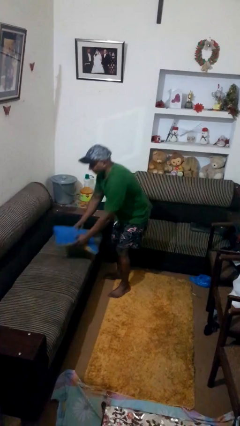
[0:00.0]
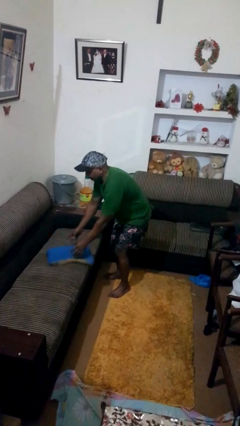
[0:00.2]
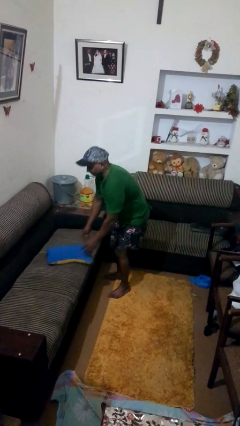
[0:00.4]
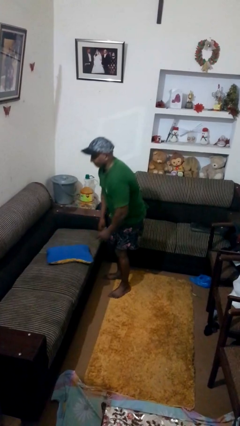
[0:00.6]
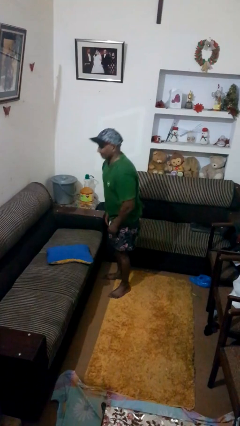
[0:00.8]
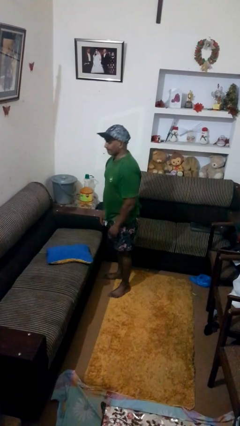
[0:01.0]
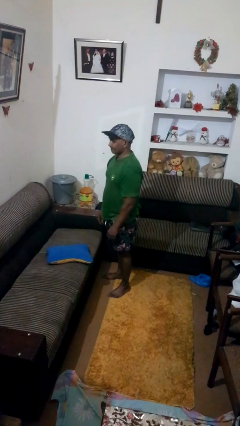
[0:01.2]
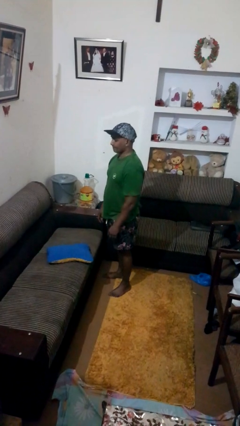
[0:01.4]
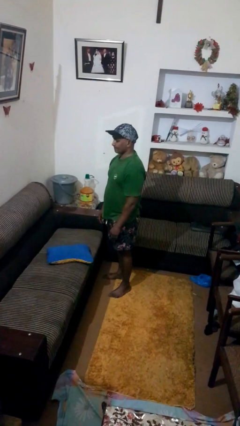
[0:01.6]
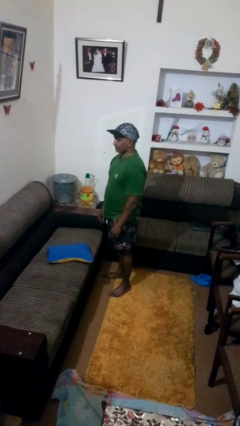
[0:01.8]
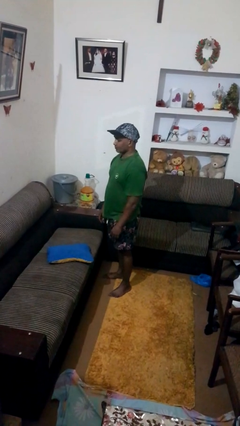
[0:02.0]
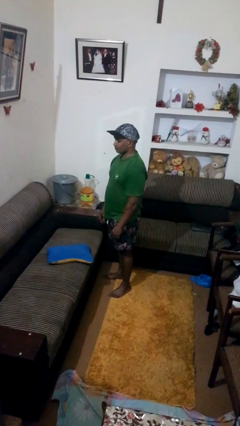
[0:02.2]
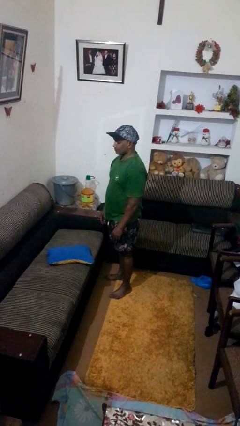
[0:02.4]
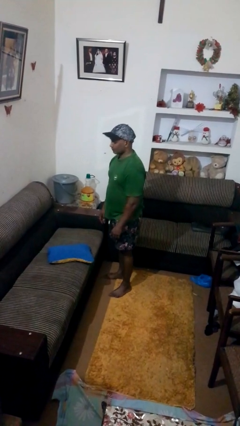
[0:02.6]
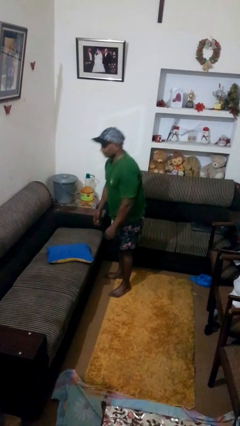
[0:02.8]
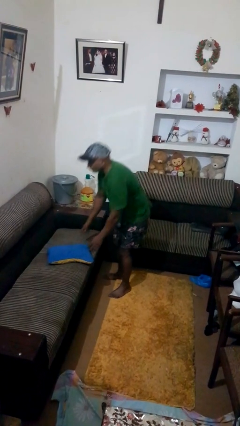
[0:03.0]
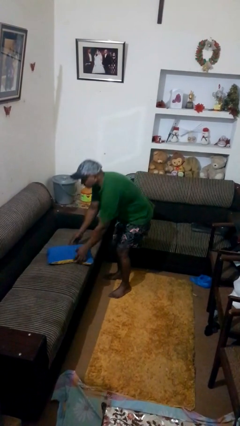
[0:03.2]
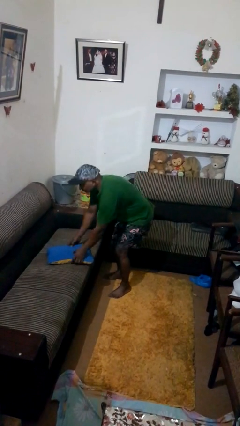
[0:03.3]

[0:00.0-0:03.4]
person puts down object on couch

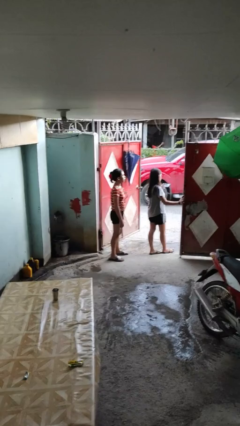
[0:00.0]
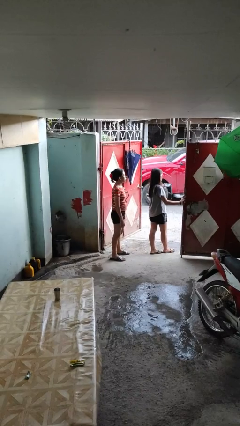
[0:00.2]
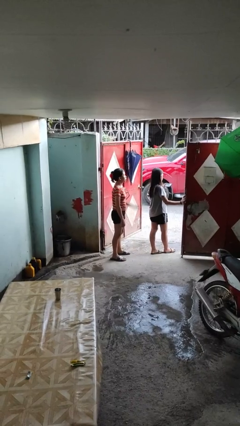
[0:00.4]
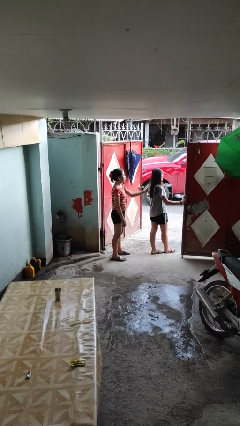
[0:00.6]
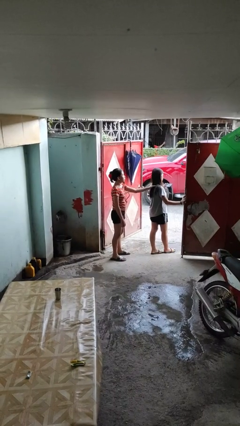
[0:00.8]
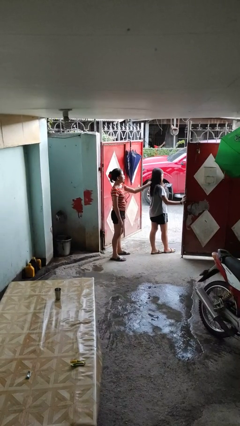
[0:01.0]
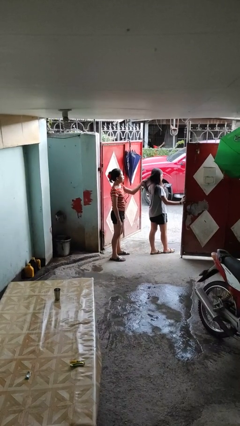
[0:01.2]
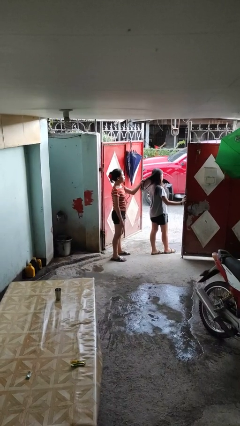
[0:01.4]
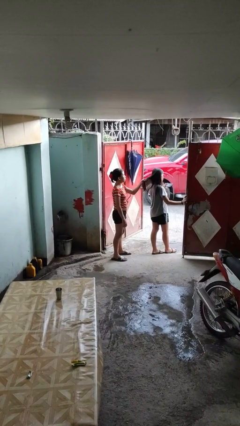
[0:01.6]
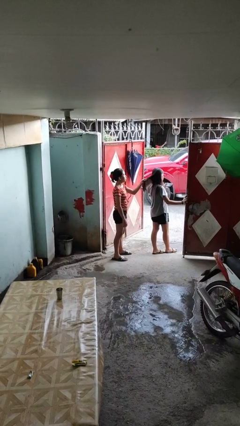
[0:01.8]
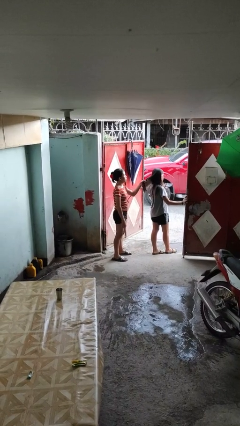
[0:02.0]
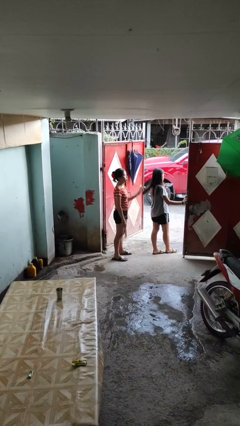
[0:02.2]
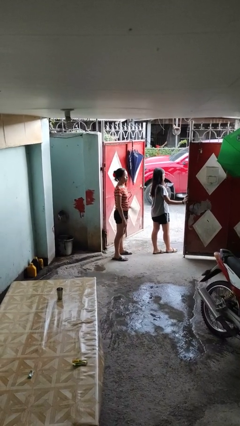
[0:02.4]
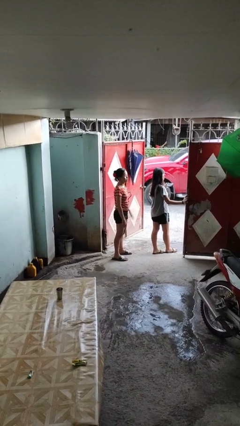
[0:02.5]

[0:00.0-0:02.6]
person grabs person by hair

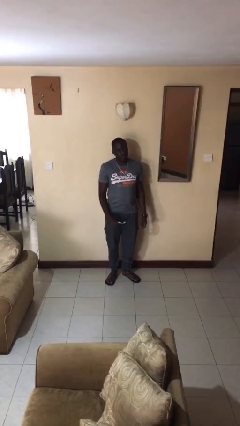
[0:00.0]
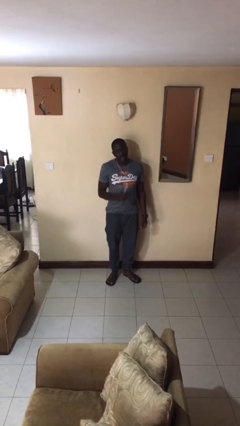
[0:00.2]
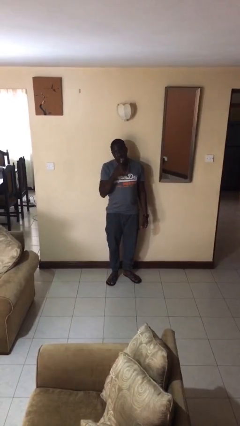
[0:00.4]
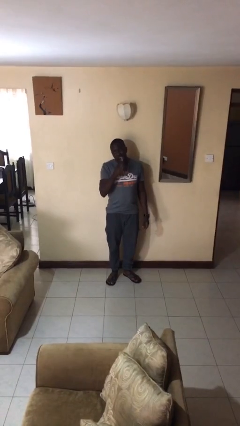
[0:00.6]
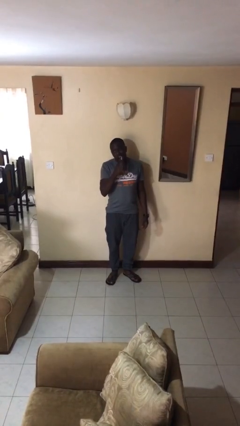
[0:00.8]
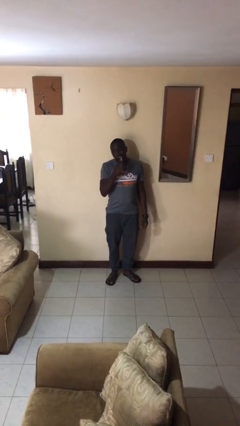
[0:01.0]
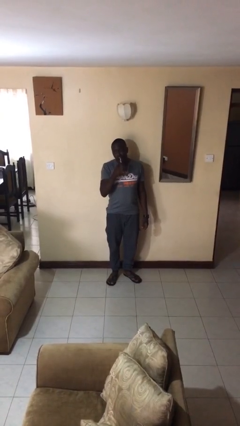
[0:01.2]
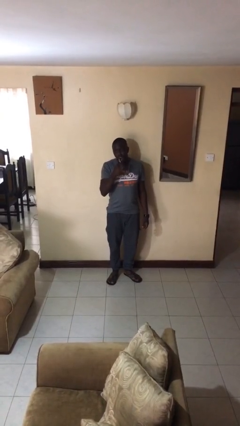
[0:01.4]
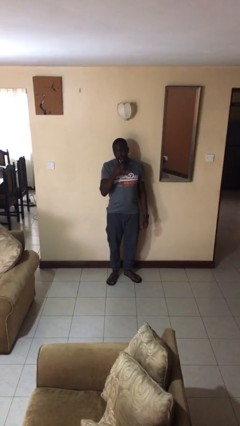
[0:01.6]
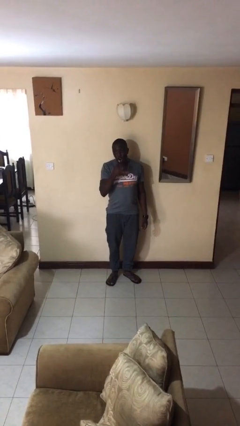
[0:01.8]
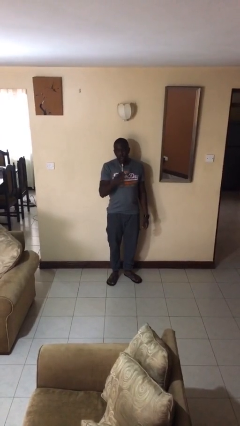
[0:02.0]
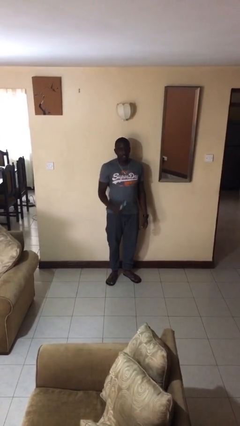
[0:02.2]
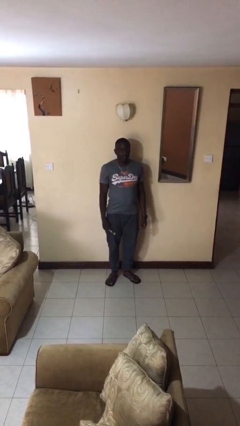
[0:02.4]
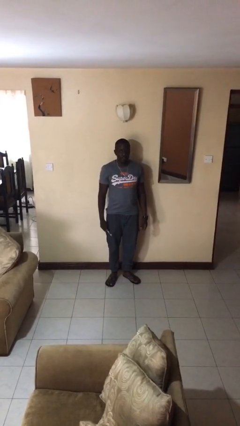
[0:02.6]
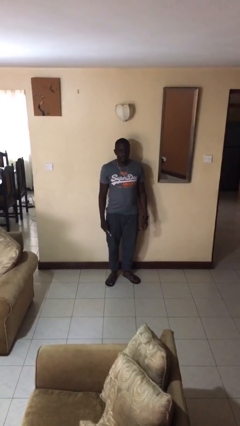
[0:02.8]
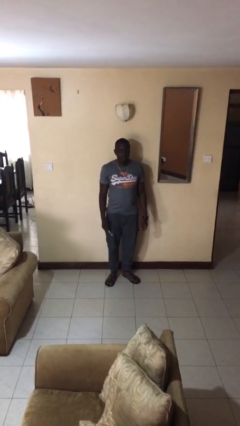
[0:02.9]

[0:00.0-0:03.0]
person brushes teeth

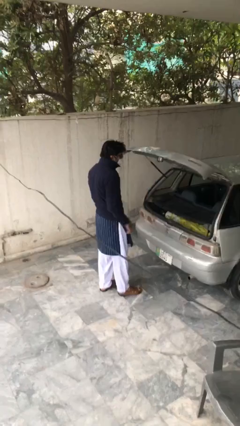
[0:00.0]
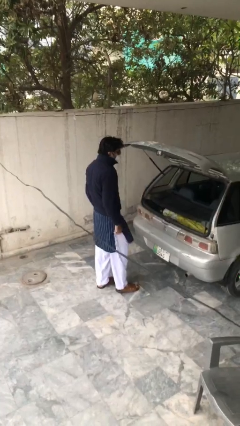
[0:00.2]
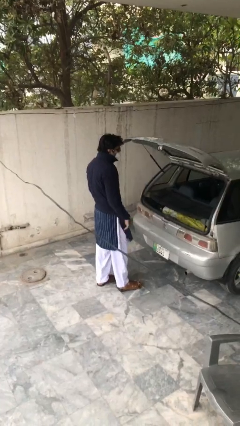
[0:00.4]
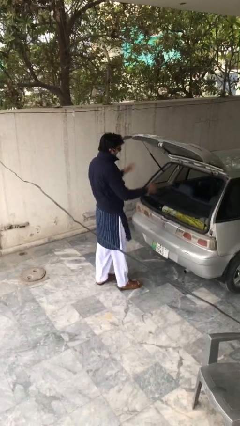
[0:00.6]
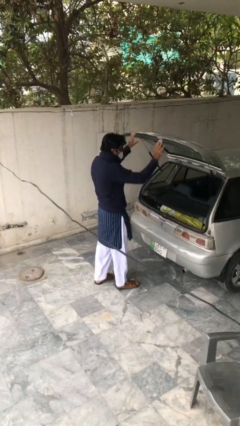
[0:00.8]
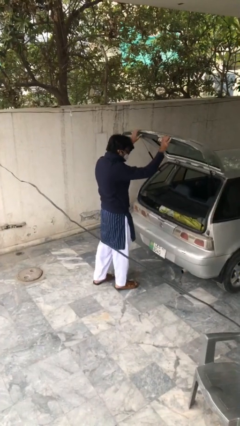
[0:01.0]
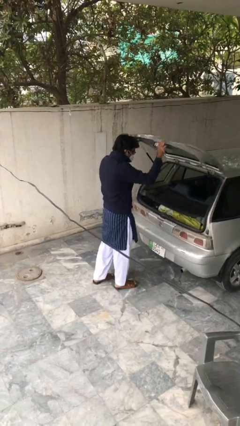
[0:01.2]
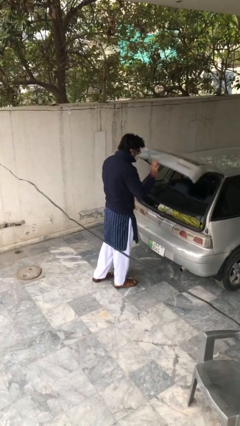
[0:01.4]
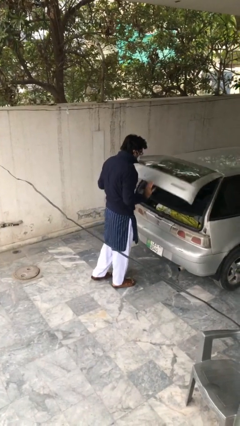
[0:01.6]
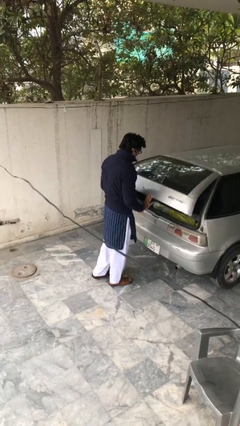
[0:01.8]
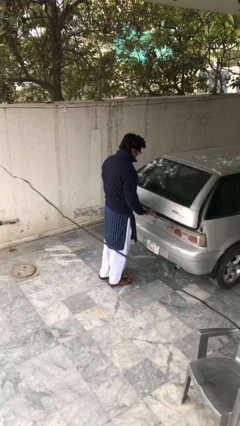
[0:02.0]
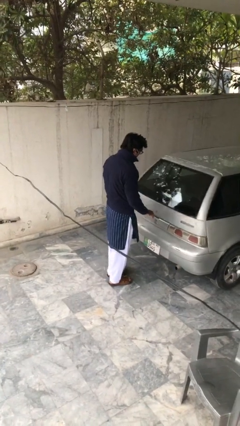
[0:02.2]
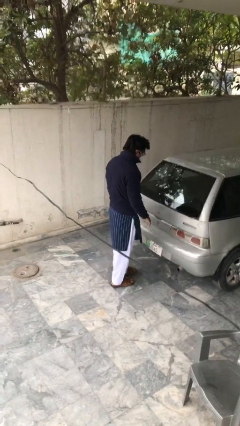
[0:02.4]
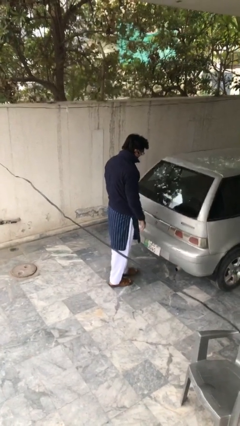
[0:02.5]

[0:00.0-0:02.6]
person closes car trunk

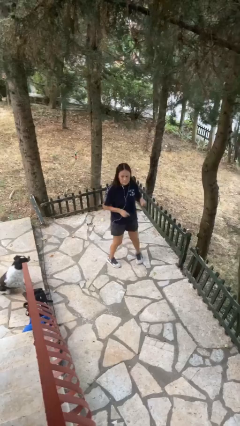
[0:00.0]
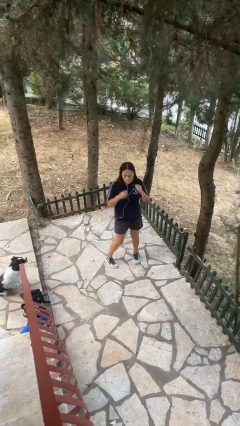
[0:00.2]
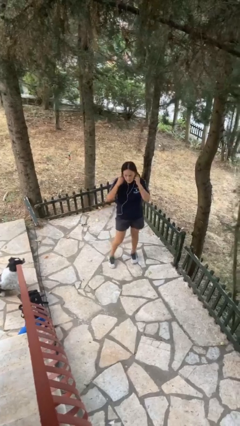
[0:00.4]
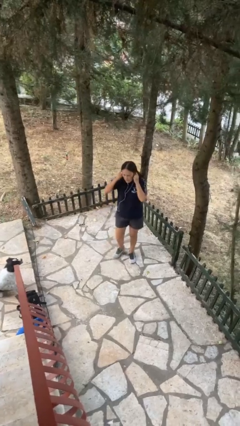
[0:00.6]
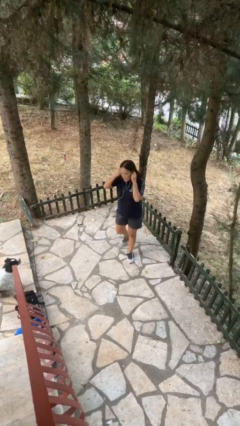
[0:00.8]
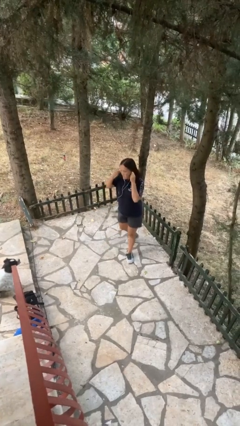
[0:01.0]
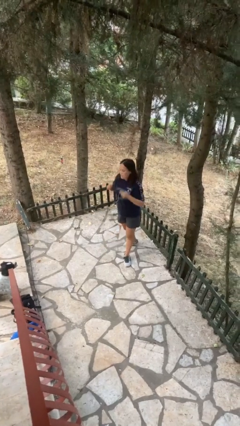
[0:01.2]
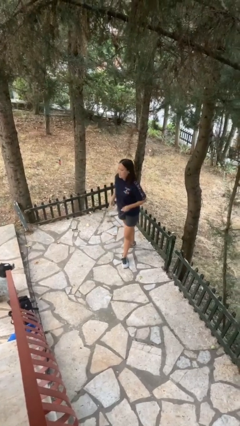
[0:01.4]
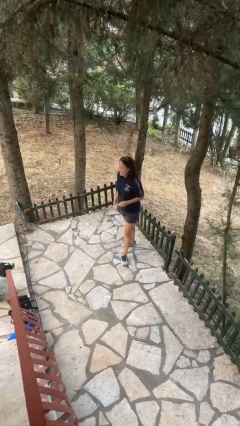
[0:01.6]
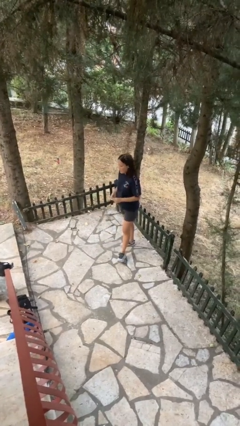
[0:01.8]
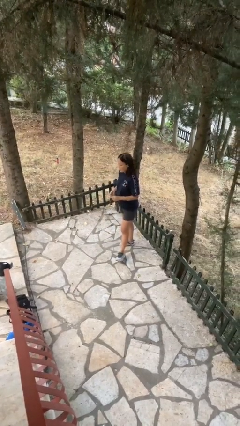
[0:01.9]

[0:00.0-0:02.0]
person takes off headphones

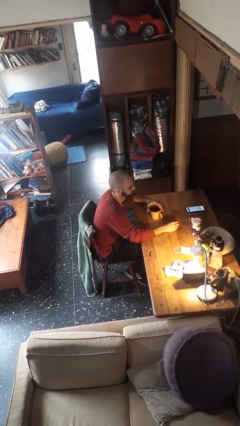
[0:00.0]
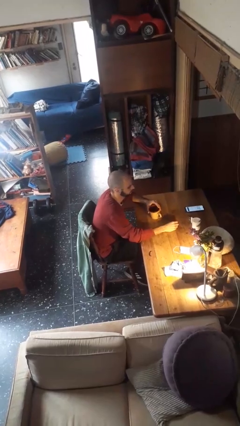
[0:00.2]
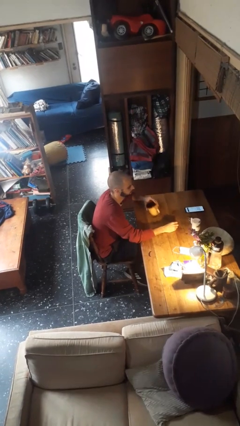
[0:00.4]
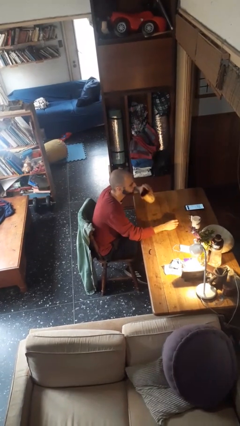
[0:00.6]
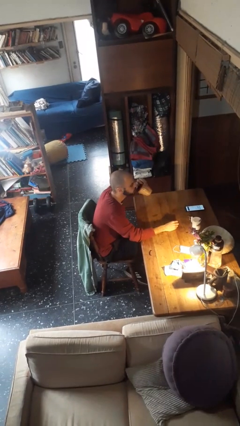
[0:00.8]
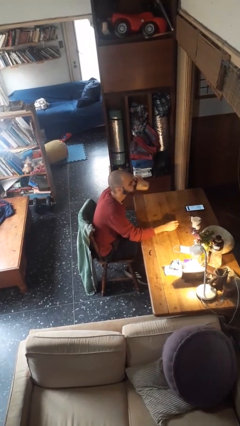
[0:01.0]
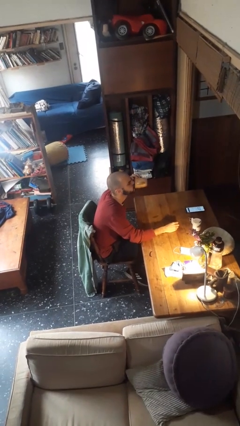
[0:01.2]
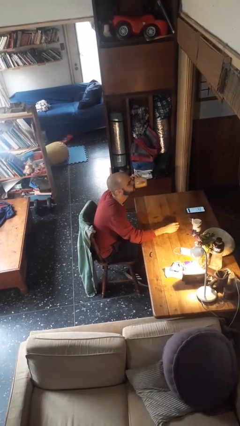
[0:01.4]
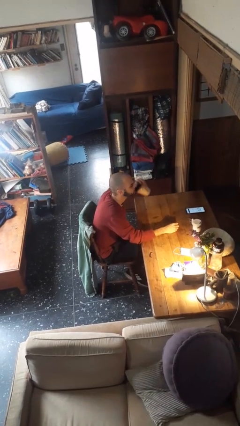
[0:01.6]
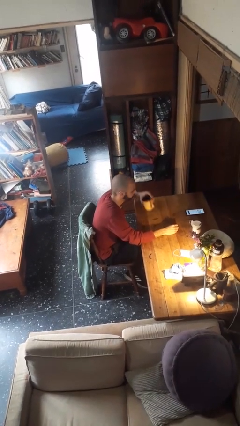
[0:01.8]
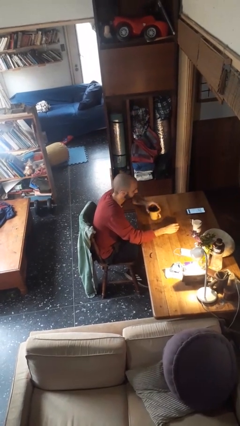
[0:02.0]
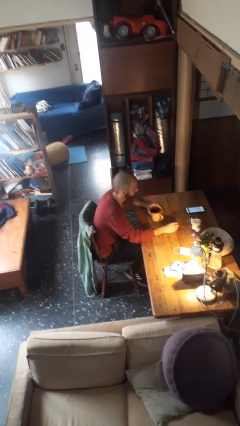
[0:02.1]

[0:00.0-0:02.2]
person drinks from mug

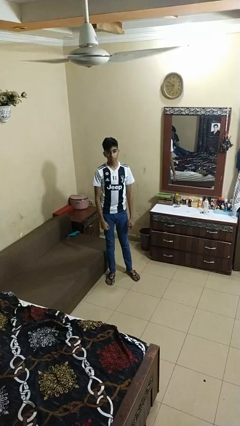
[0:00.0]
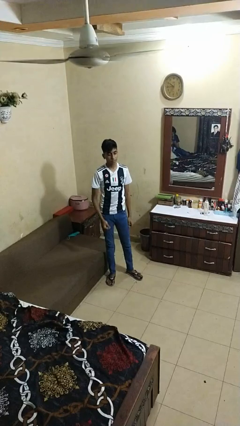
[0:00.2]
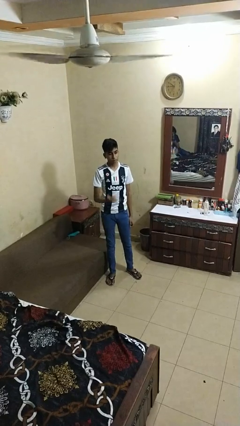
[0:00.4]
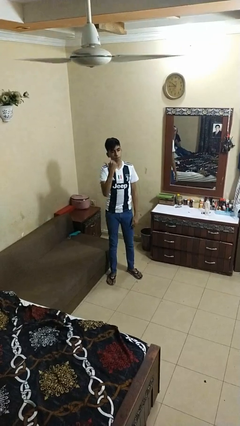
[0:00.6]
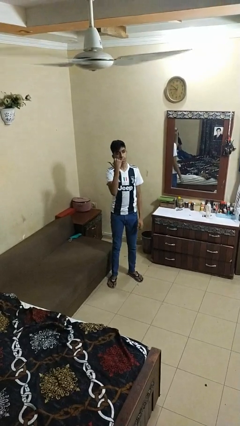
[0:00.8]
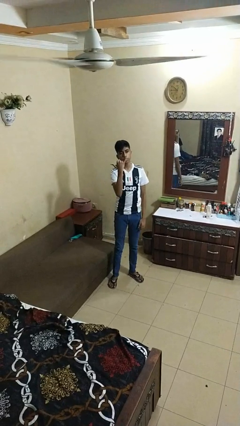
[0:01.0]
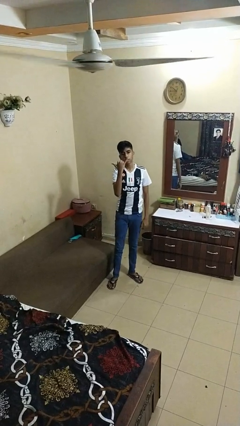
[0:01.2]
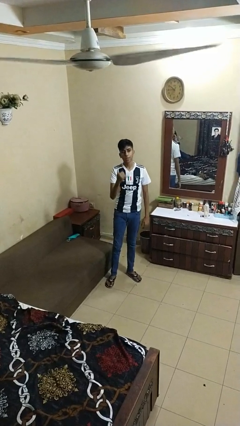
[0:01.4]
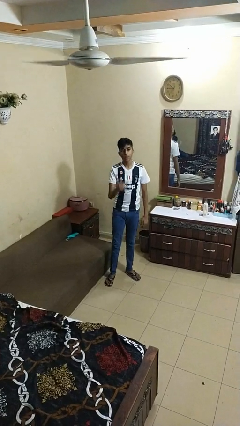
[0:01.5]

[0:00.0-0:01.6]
person gestures hang loose
